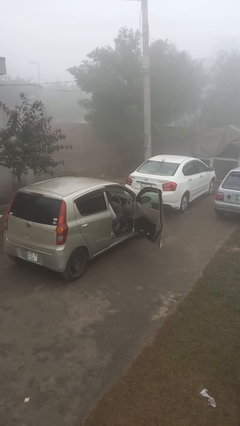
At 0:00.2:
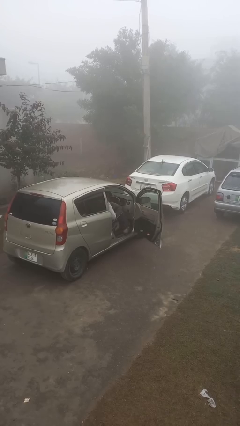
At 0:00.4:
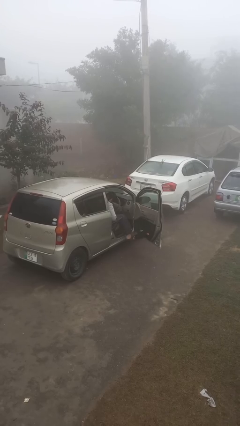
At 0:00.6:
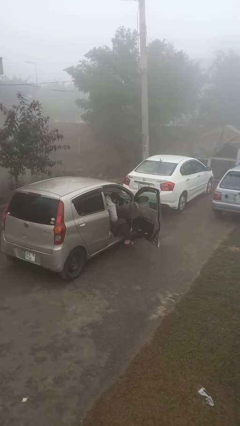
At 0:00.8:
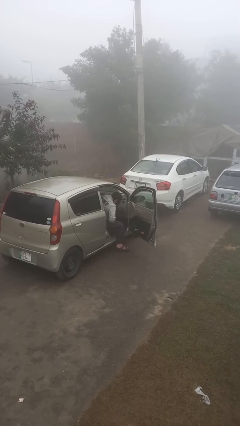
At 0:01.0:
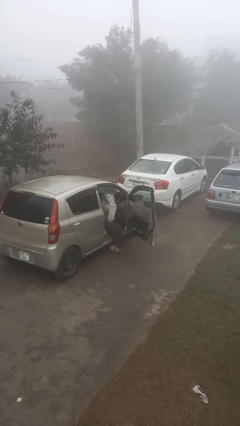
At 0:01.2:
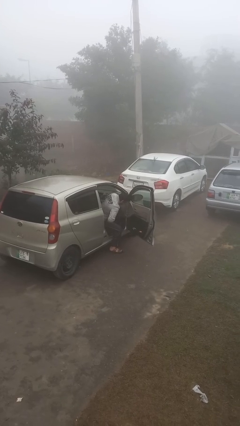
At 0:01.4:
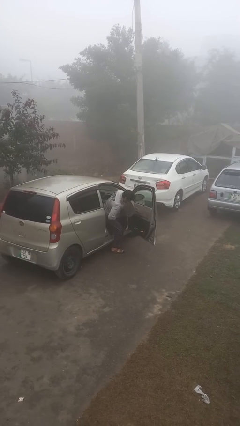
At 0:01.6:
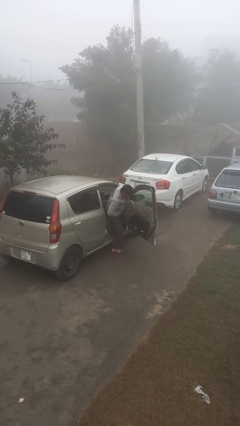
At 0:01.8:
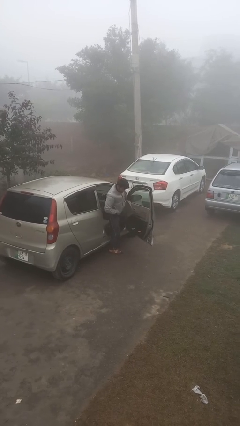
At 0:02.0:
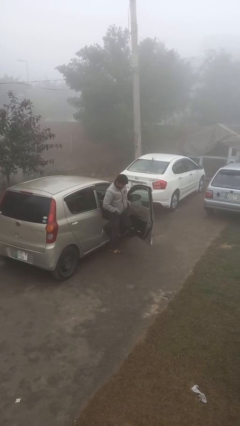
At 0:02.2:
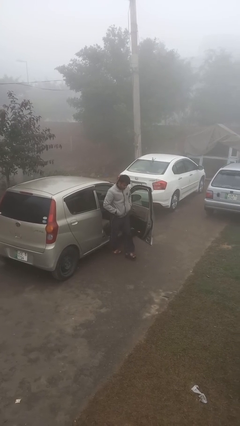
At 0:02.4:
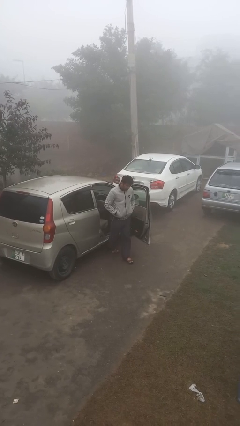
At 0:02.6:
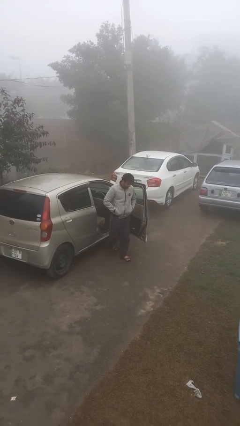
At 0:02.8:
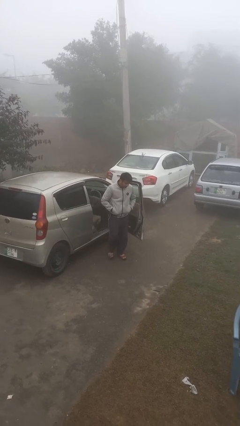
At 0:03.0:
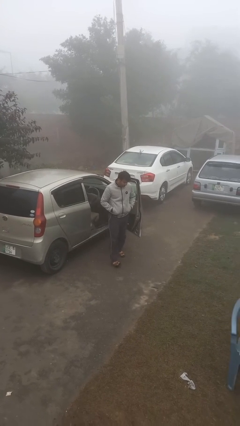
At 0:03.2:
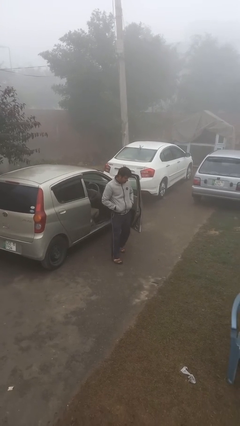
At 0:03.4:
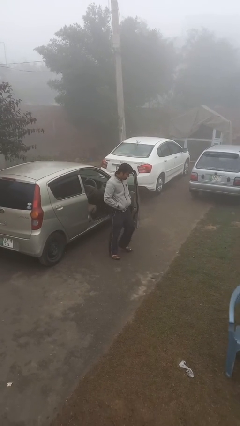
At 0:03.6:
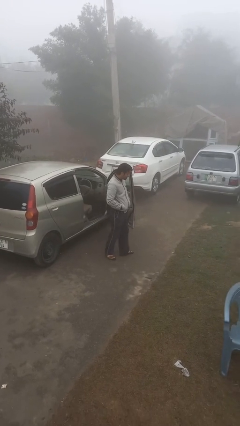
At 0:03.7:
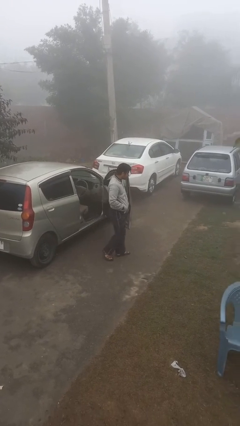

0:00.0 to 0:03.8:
person exits car

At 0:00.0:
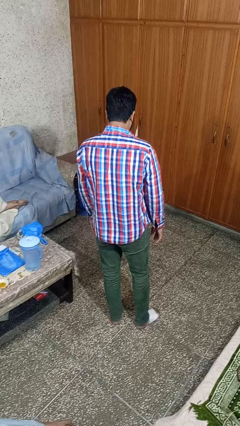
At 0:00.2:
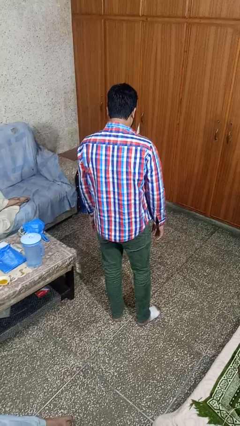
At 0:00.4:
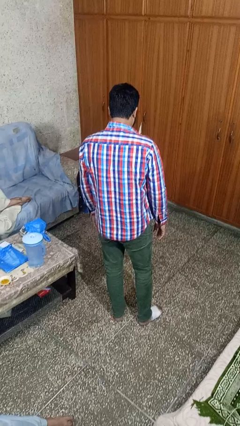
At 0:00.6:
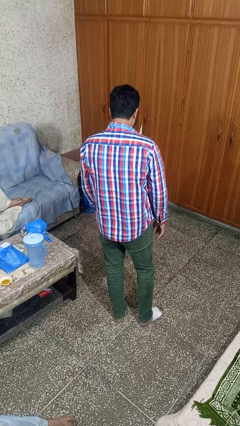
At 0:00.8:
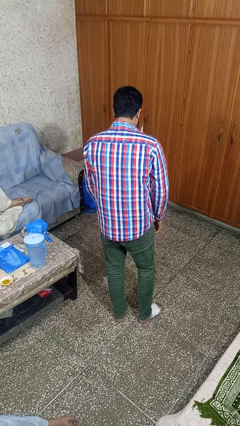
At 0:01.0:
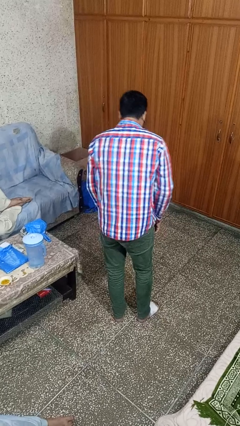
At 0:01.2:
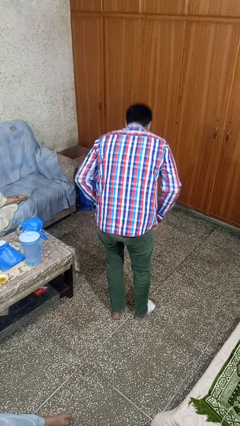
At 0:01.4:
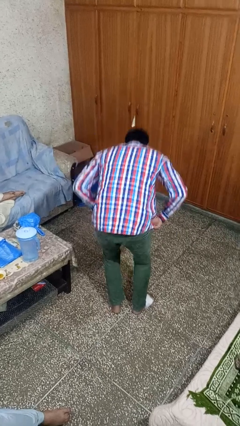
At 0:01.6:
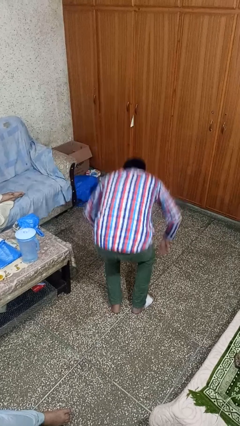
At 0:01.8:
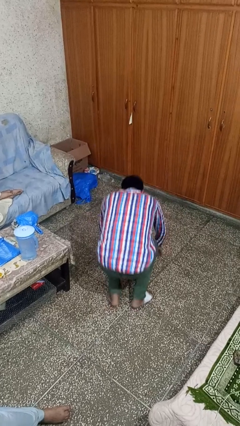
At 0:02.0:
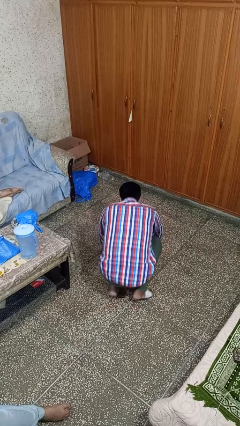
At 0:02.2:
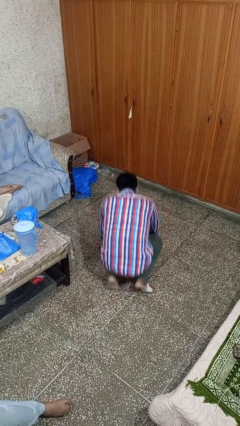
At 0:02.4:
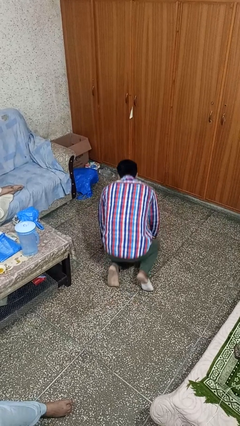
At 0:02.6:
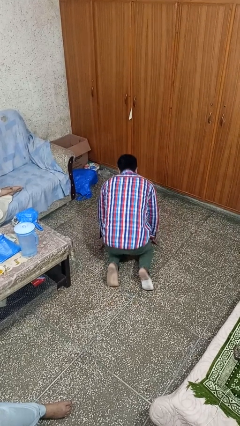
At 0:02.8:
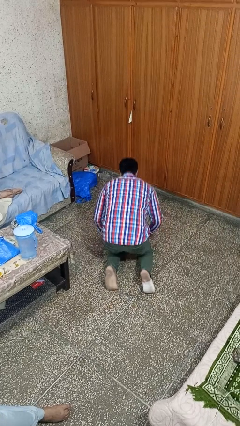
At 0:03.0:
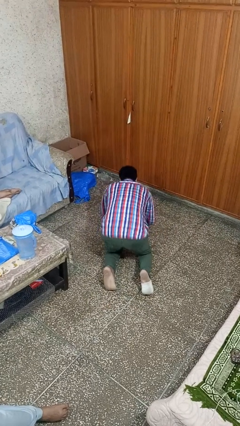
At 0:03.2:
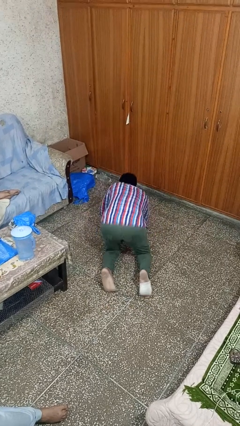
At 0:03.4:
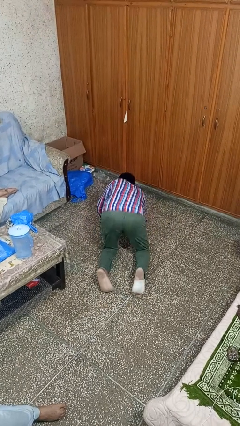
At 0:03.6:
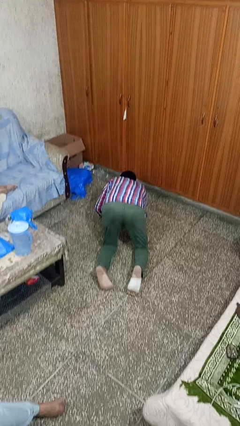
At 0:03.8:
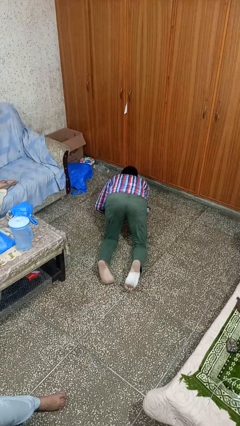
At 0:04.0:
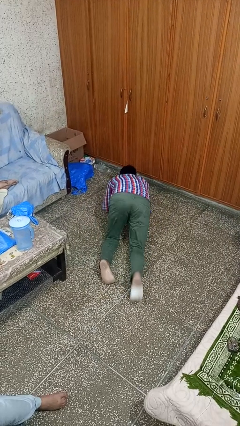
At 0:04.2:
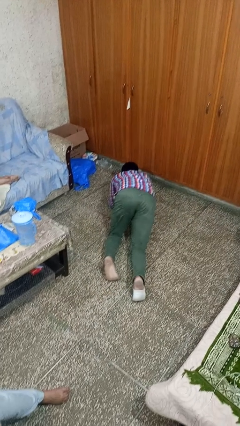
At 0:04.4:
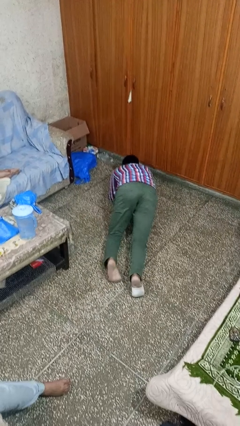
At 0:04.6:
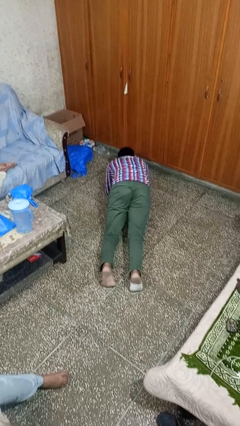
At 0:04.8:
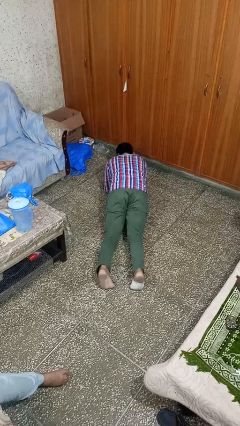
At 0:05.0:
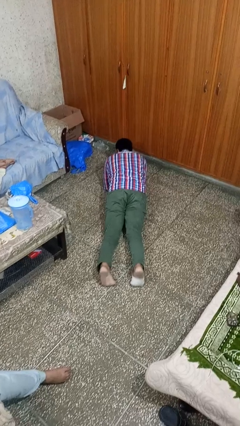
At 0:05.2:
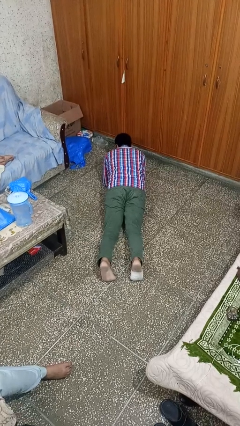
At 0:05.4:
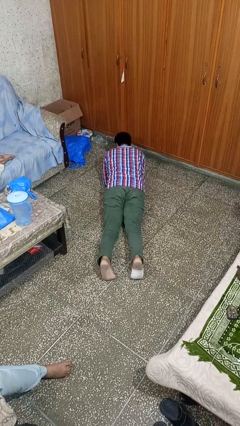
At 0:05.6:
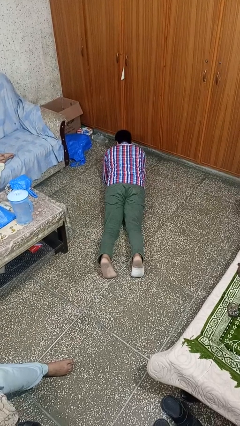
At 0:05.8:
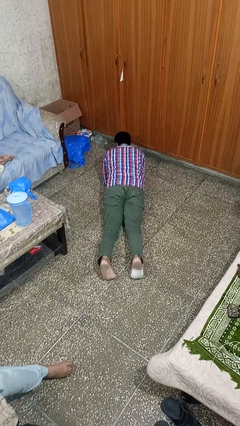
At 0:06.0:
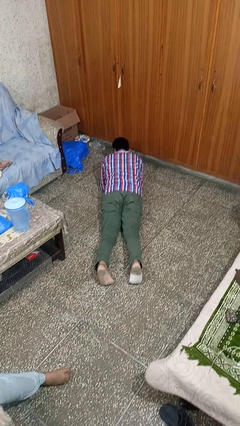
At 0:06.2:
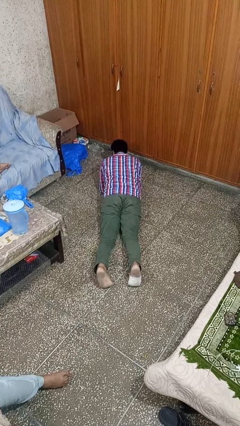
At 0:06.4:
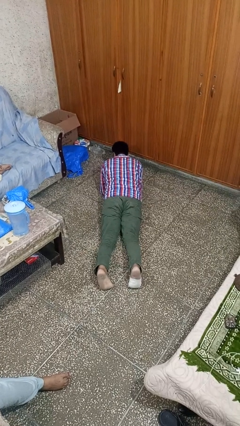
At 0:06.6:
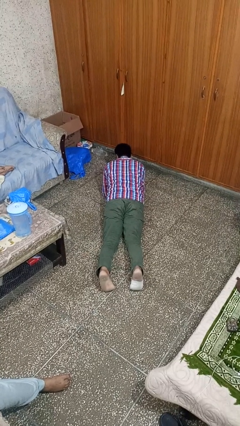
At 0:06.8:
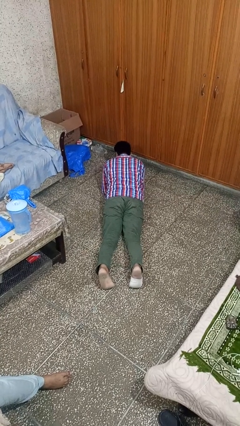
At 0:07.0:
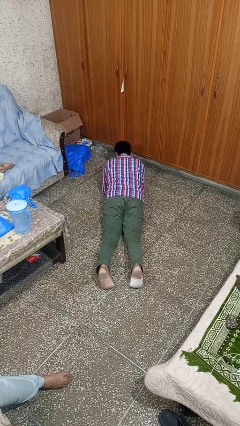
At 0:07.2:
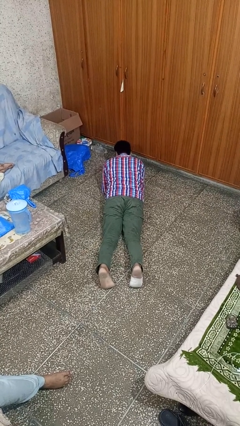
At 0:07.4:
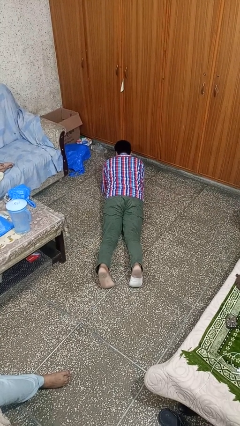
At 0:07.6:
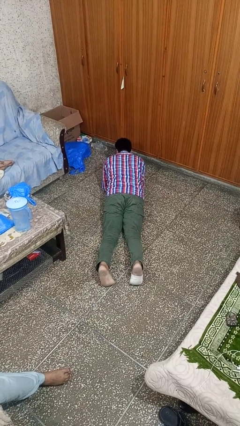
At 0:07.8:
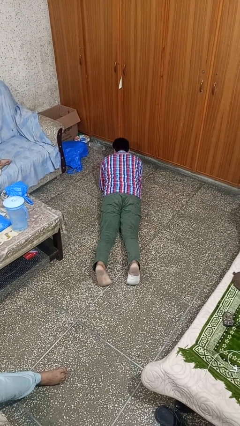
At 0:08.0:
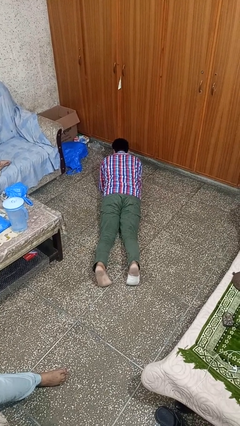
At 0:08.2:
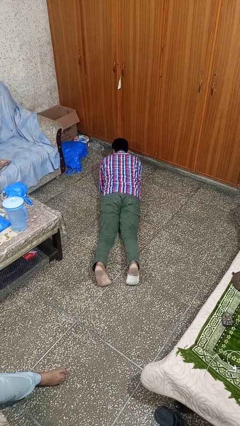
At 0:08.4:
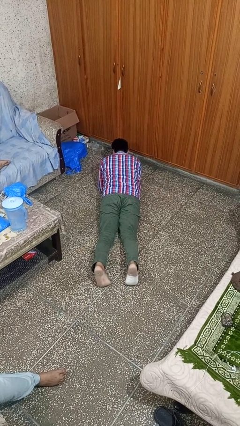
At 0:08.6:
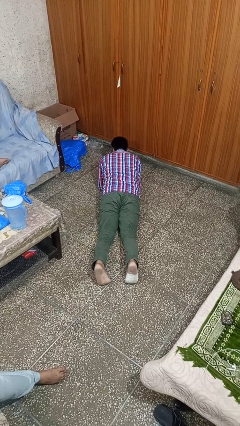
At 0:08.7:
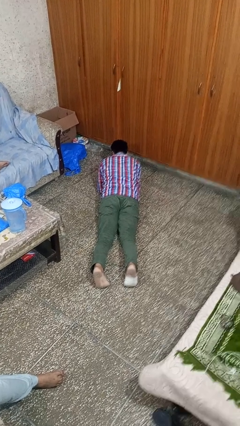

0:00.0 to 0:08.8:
person exercises with plank

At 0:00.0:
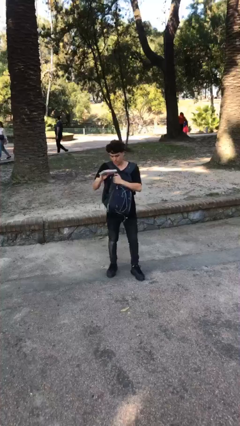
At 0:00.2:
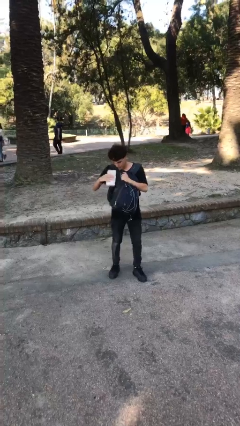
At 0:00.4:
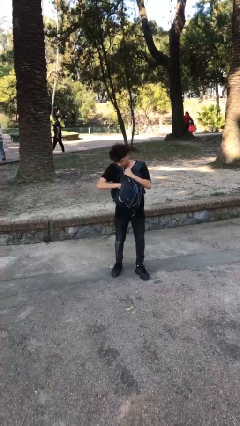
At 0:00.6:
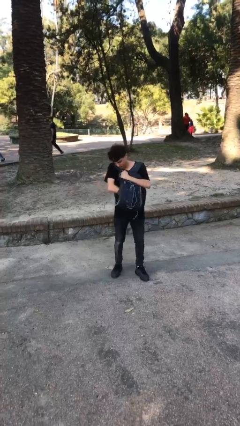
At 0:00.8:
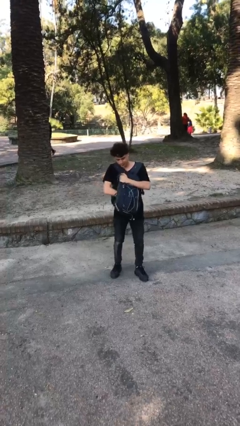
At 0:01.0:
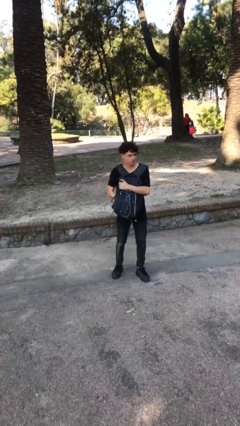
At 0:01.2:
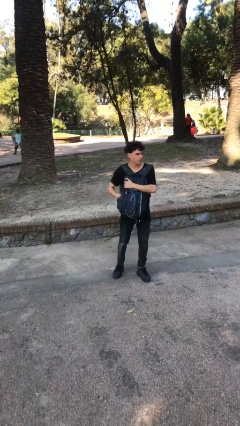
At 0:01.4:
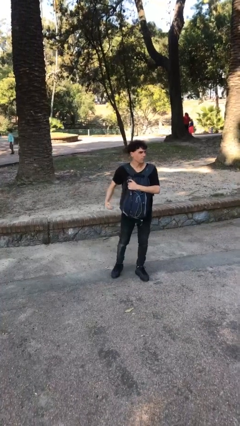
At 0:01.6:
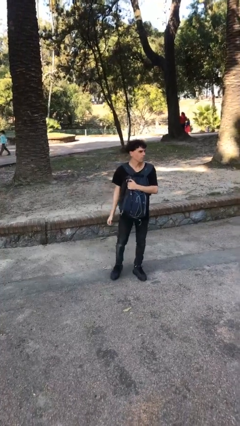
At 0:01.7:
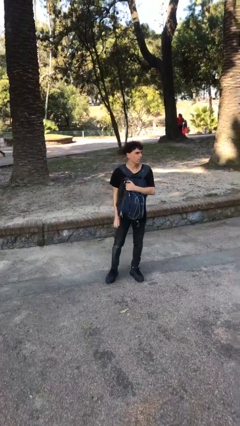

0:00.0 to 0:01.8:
person puts object into backpack

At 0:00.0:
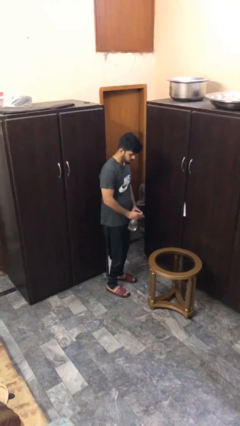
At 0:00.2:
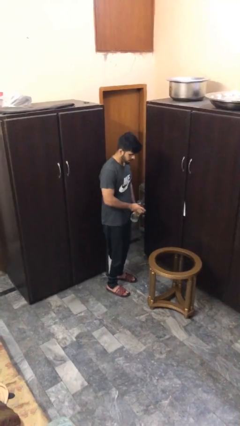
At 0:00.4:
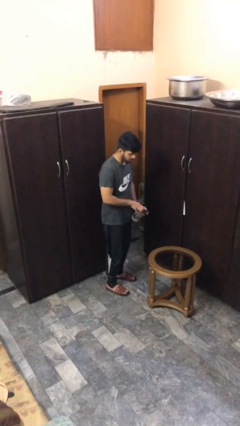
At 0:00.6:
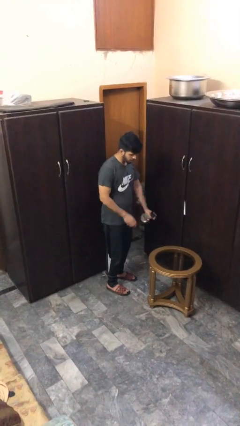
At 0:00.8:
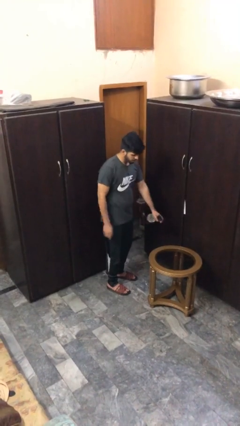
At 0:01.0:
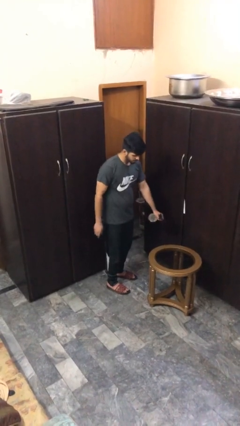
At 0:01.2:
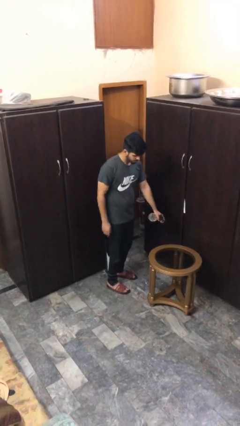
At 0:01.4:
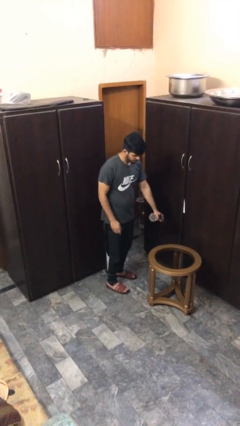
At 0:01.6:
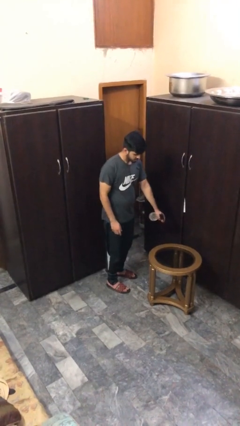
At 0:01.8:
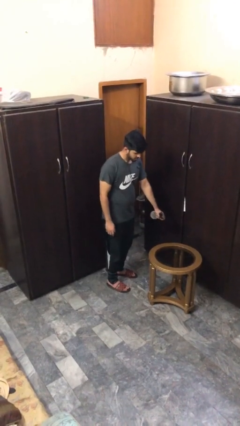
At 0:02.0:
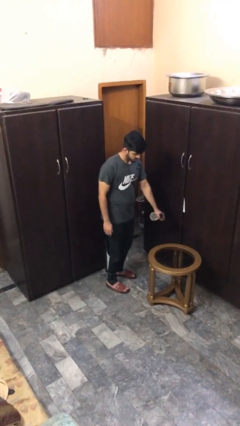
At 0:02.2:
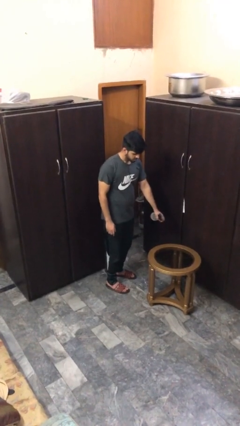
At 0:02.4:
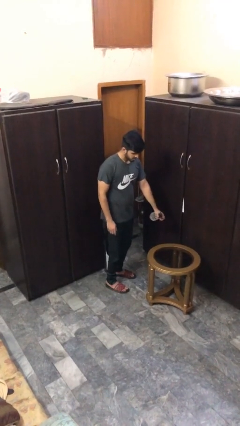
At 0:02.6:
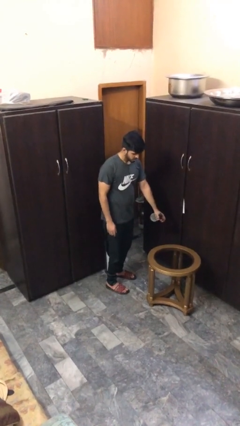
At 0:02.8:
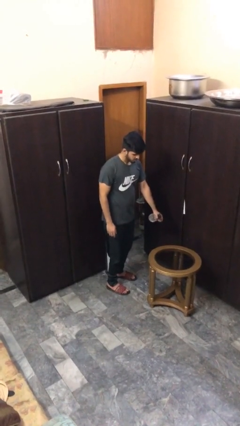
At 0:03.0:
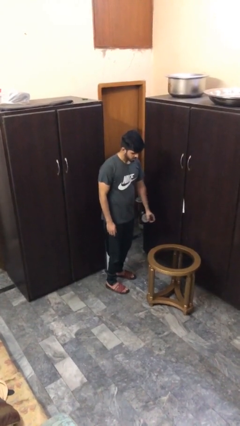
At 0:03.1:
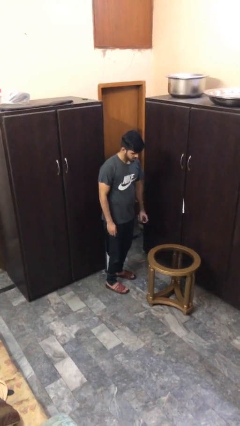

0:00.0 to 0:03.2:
person sprays from bottle

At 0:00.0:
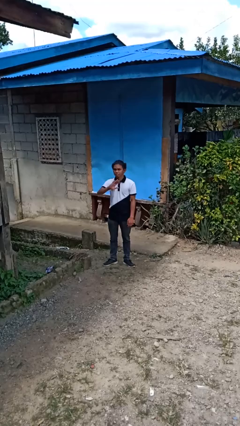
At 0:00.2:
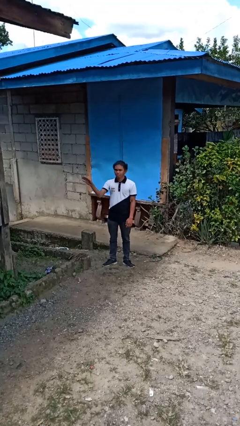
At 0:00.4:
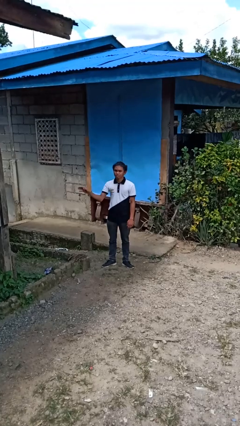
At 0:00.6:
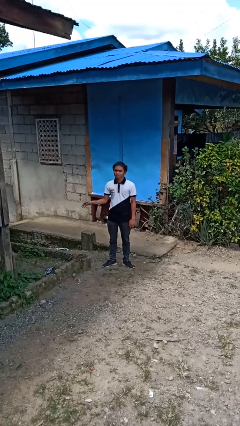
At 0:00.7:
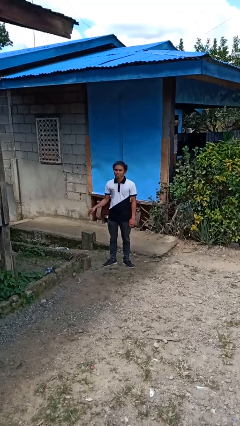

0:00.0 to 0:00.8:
person gestures swipe right
